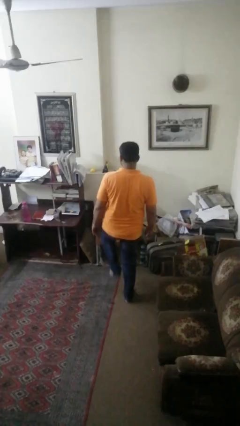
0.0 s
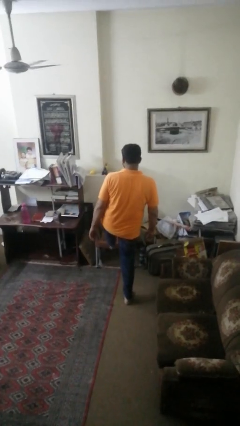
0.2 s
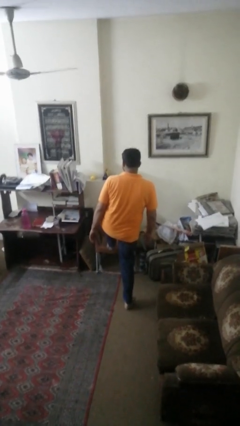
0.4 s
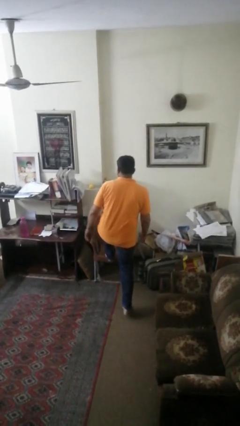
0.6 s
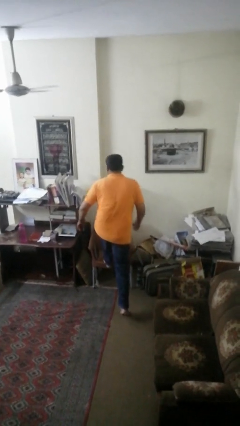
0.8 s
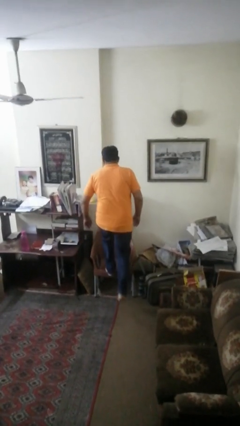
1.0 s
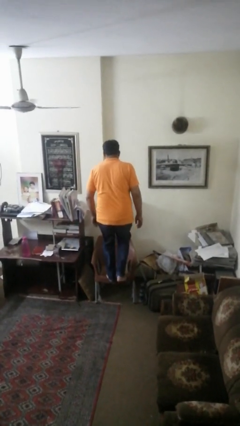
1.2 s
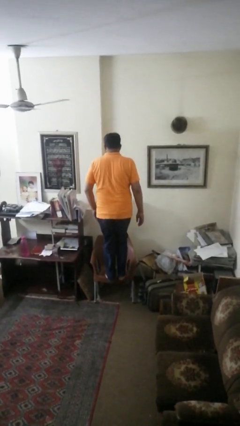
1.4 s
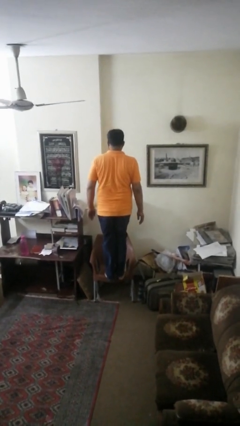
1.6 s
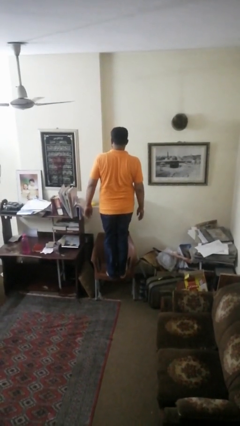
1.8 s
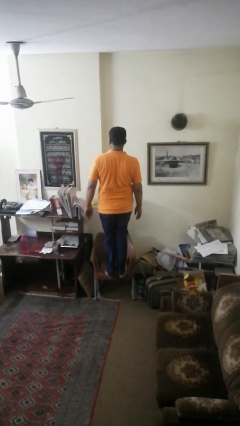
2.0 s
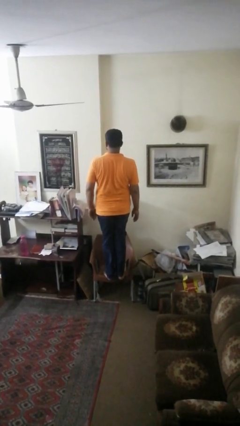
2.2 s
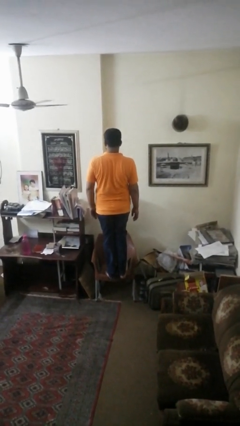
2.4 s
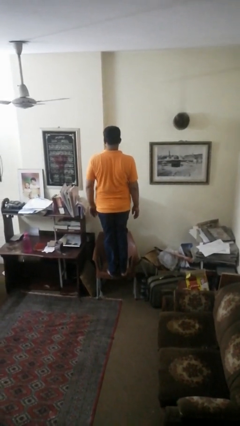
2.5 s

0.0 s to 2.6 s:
person climbs on chair

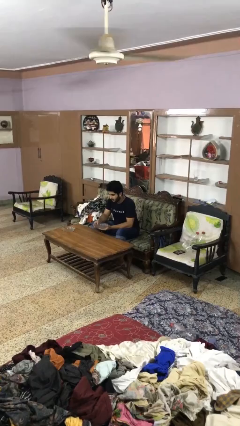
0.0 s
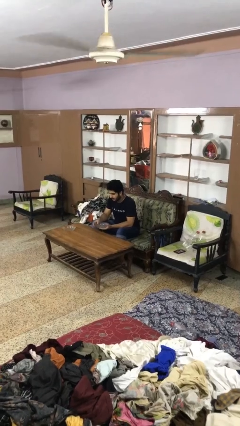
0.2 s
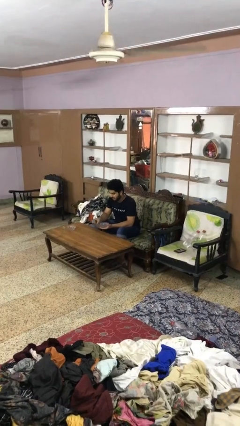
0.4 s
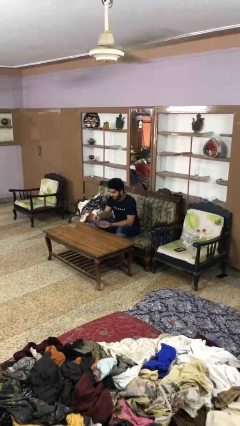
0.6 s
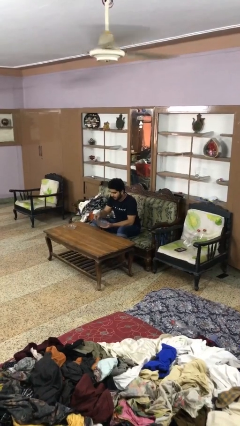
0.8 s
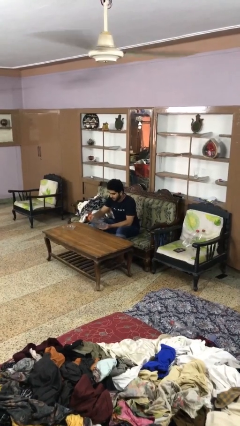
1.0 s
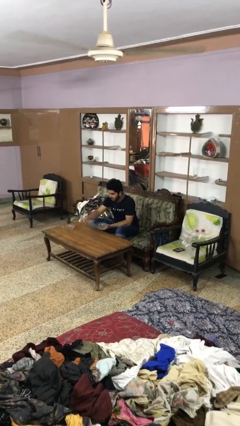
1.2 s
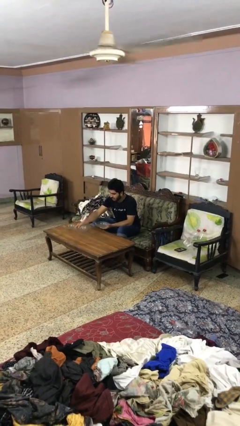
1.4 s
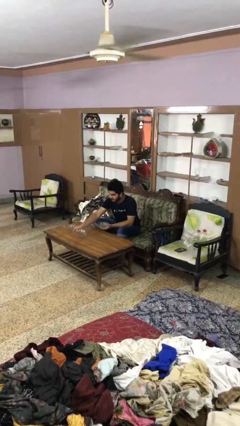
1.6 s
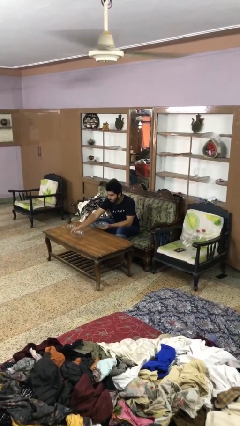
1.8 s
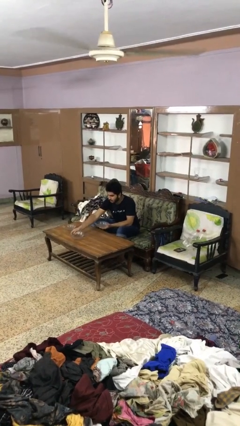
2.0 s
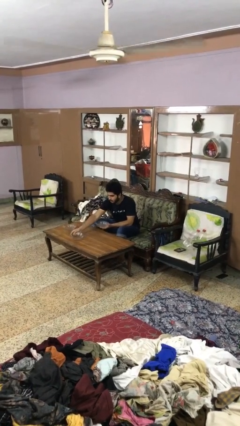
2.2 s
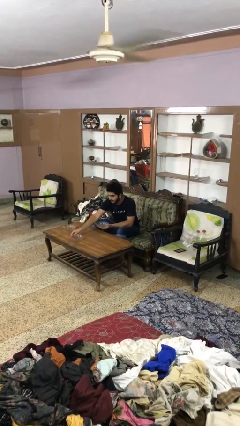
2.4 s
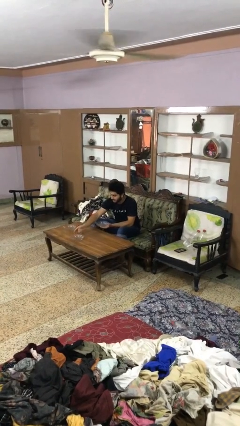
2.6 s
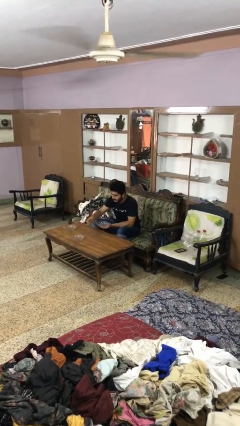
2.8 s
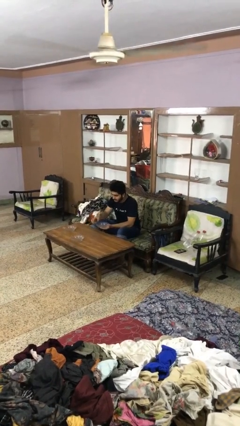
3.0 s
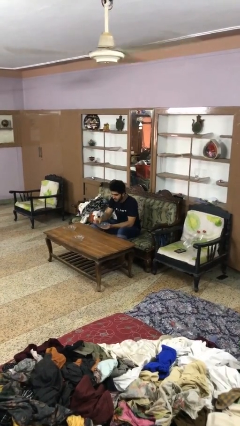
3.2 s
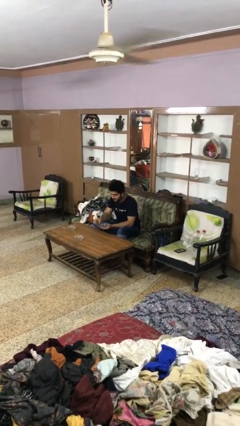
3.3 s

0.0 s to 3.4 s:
person sets table

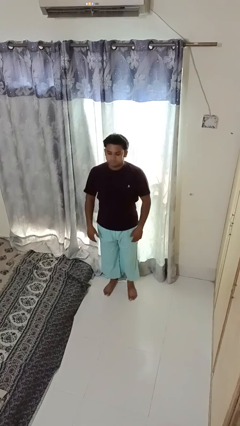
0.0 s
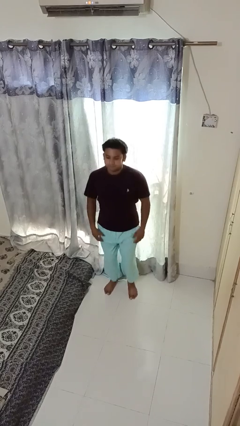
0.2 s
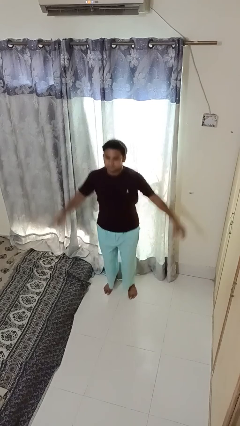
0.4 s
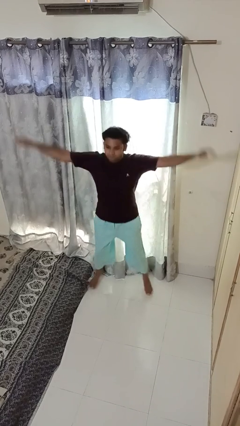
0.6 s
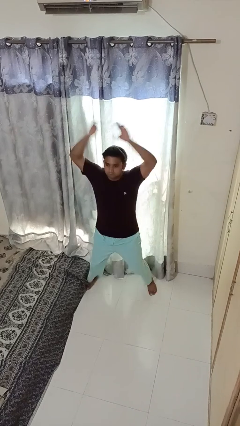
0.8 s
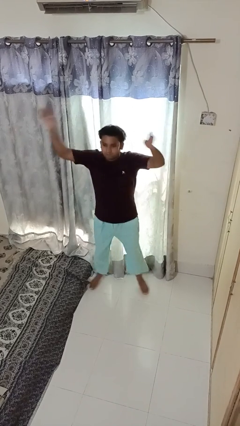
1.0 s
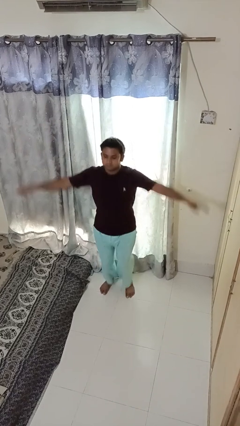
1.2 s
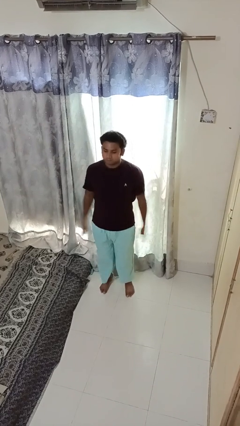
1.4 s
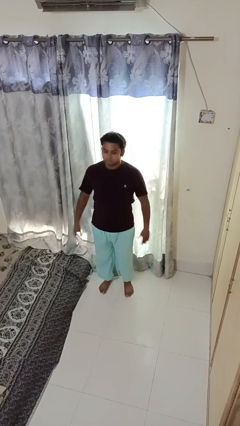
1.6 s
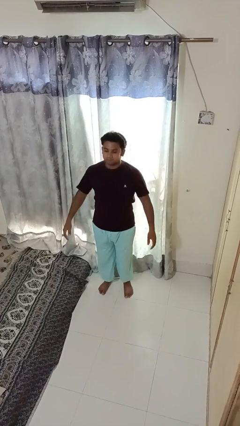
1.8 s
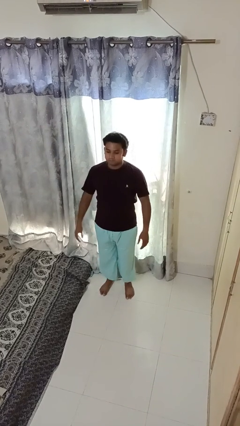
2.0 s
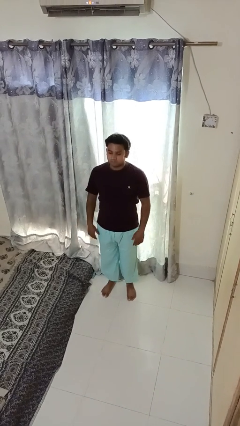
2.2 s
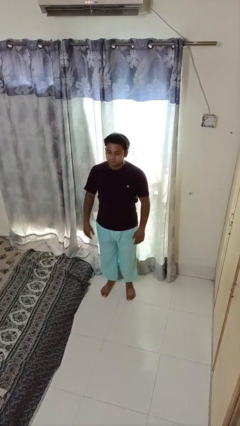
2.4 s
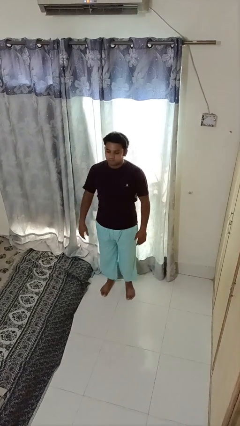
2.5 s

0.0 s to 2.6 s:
person exercises with jumping jacks

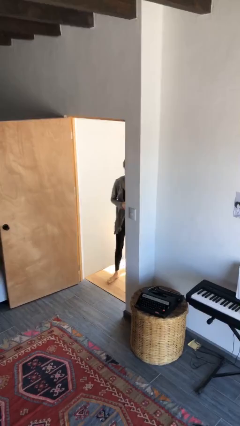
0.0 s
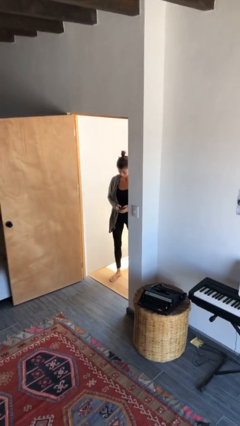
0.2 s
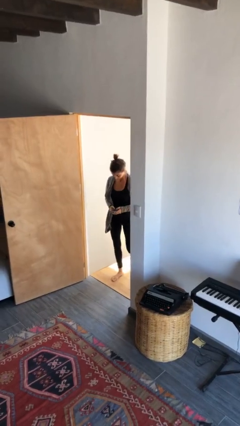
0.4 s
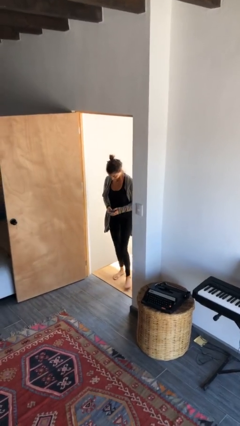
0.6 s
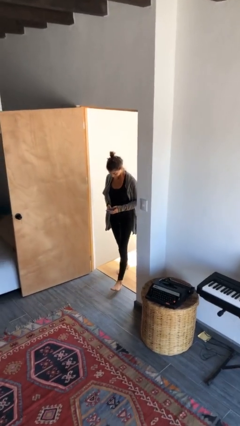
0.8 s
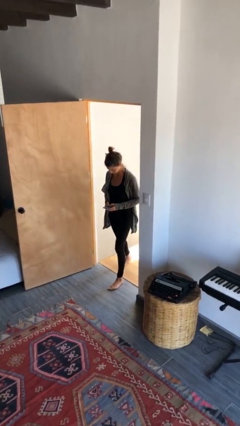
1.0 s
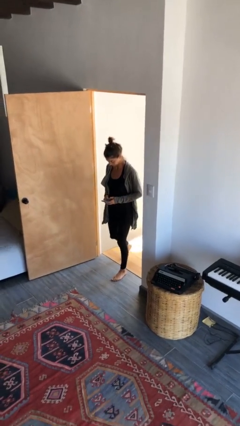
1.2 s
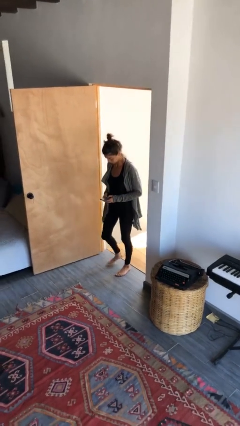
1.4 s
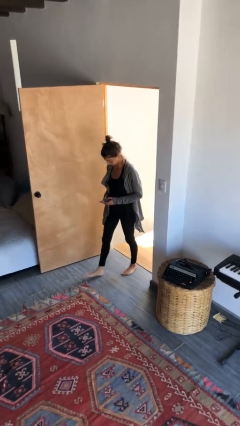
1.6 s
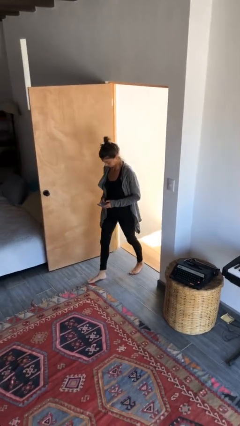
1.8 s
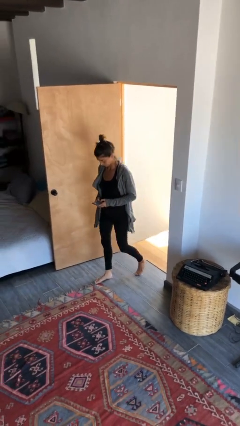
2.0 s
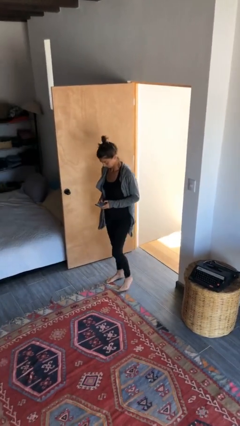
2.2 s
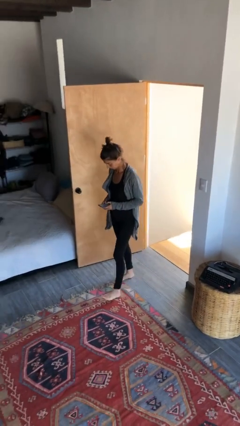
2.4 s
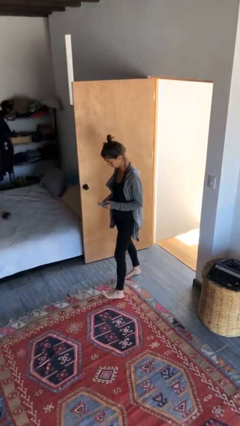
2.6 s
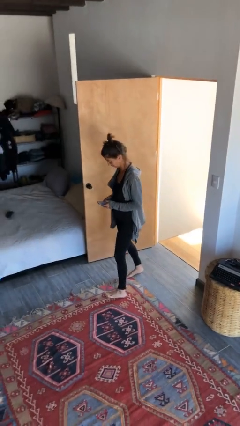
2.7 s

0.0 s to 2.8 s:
person enters scene through structure

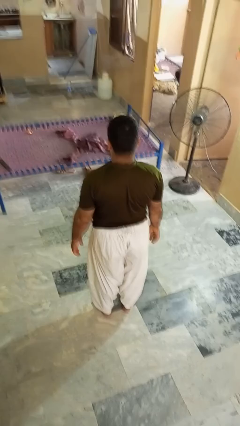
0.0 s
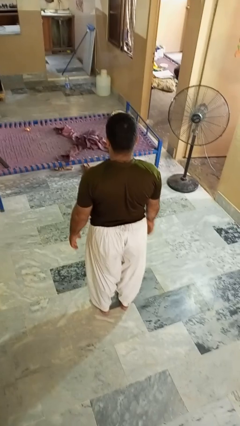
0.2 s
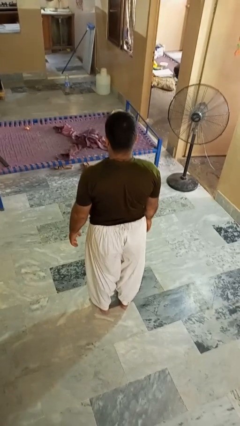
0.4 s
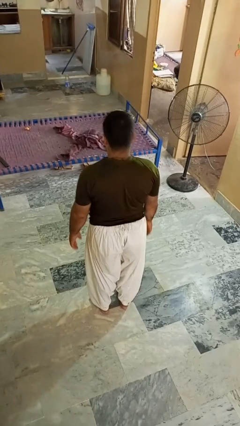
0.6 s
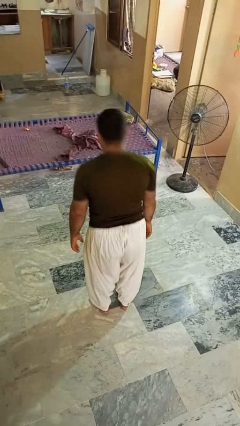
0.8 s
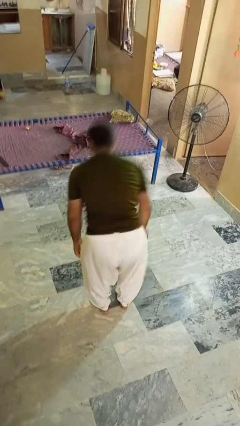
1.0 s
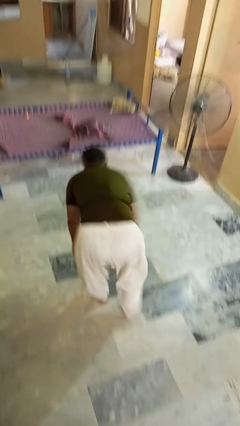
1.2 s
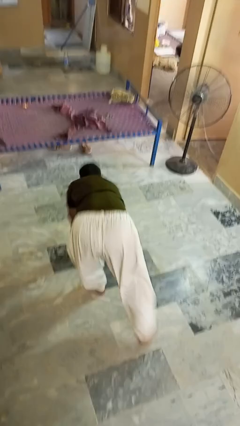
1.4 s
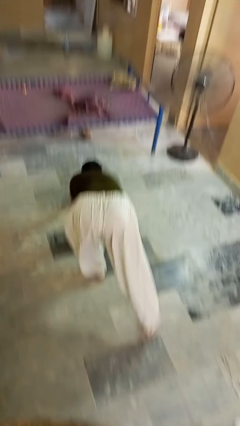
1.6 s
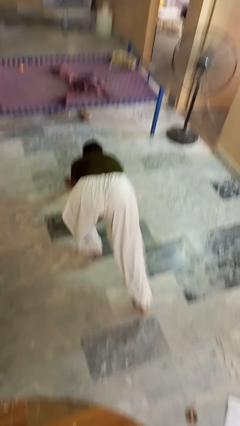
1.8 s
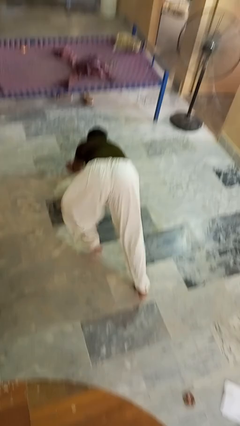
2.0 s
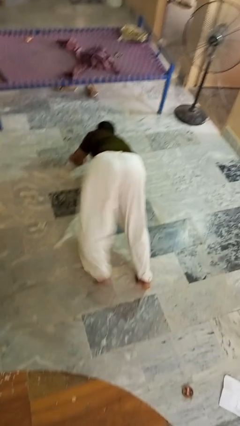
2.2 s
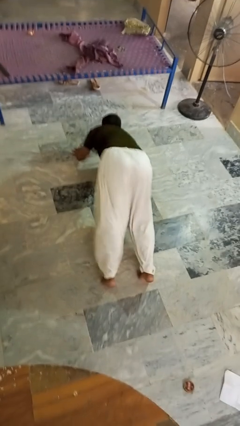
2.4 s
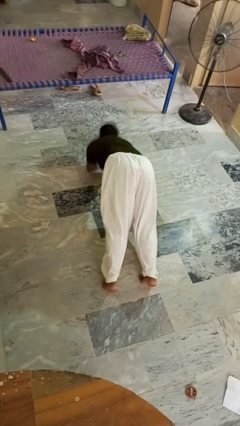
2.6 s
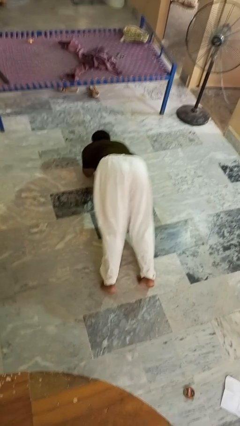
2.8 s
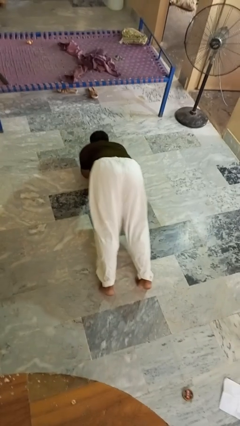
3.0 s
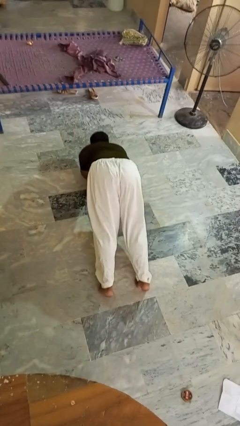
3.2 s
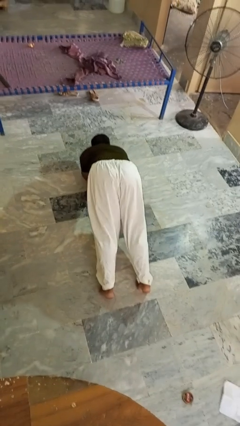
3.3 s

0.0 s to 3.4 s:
person exercises with plank

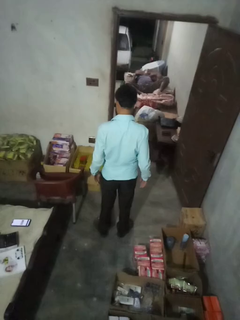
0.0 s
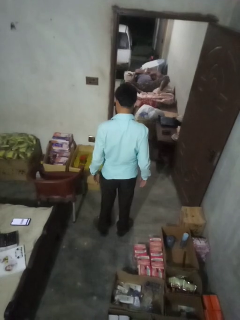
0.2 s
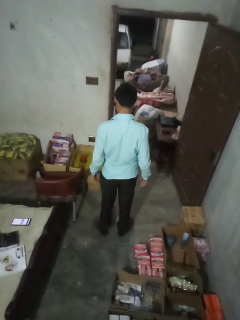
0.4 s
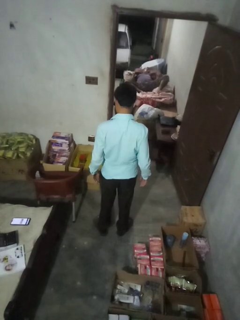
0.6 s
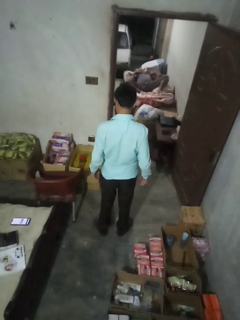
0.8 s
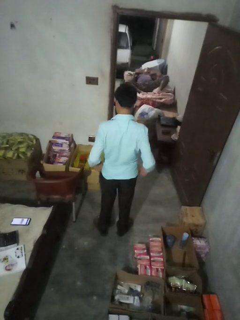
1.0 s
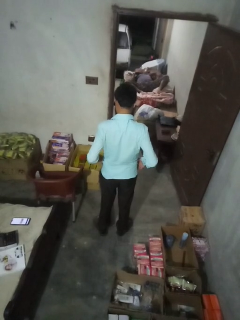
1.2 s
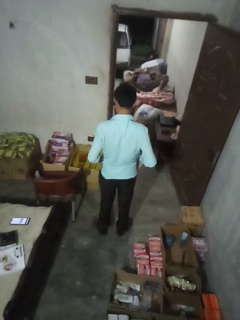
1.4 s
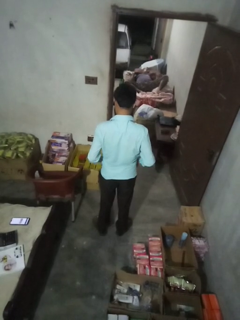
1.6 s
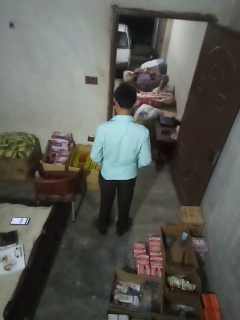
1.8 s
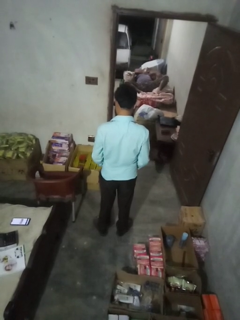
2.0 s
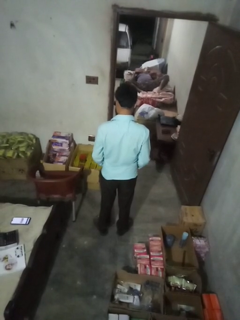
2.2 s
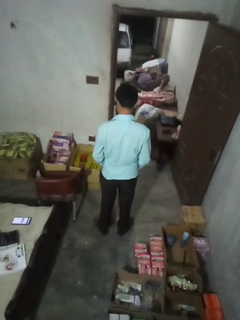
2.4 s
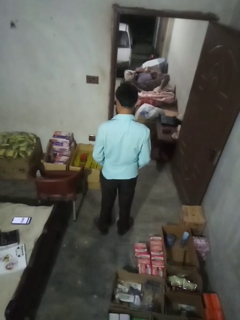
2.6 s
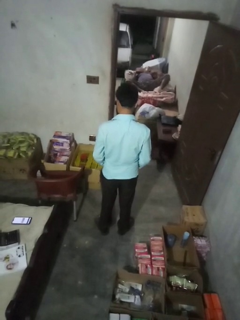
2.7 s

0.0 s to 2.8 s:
person puts hands in back pockets
